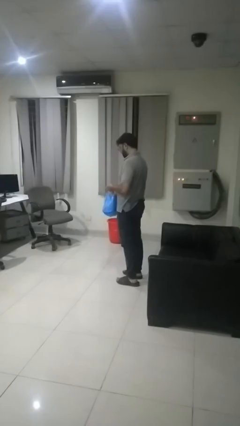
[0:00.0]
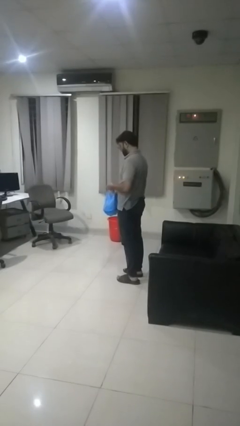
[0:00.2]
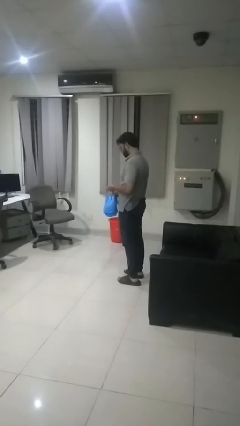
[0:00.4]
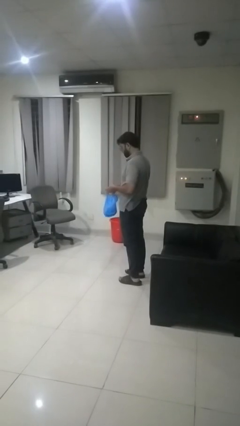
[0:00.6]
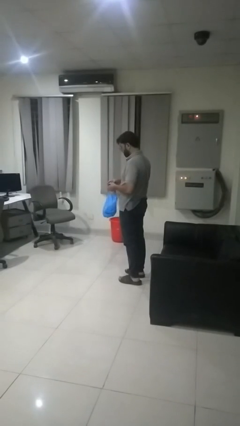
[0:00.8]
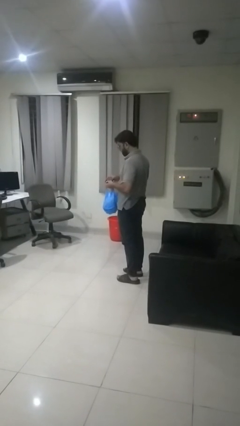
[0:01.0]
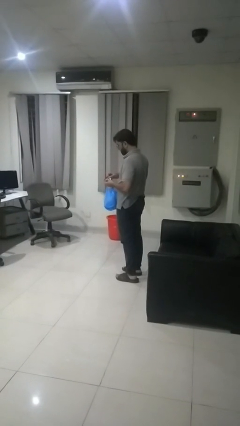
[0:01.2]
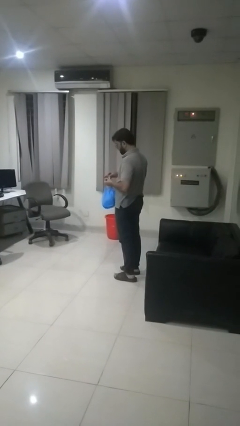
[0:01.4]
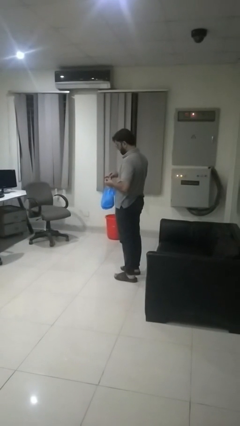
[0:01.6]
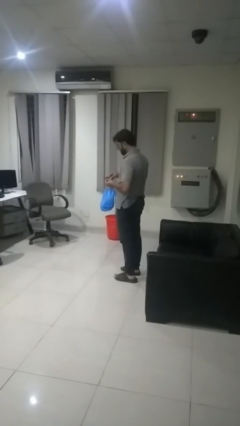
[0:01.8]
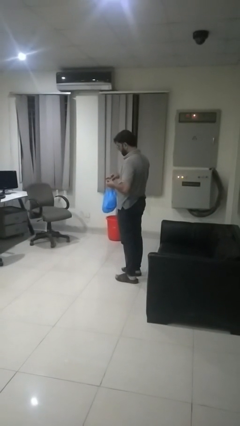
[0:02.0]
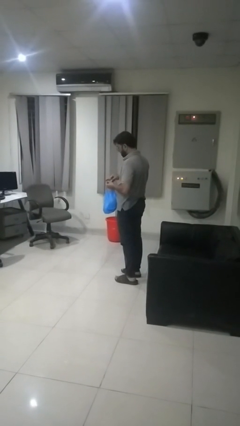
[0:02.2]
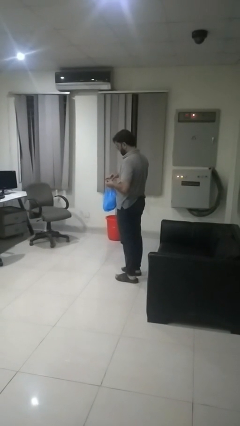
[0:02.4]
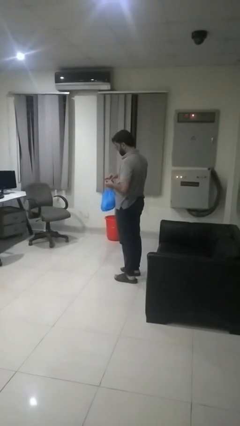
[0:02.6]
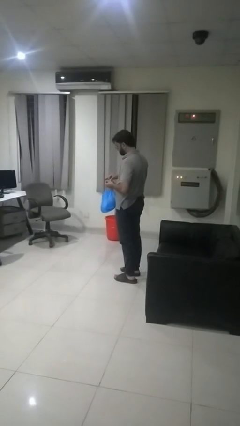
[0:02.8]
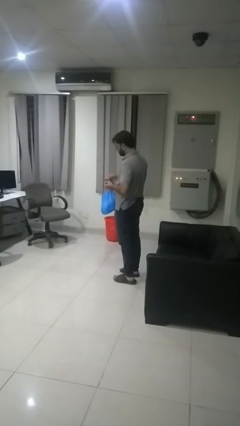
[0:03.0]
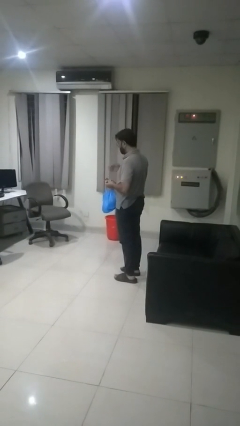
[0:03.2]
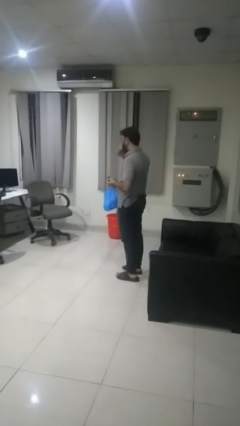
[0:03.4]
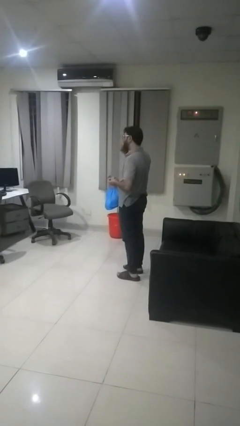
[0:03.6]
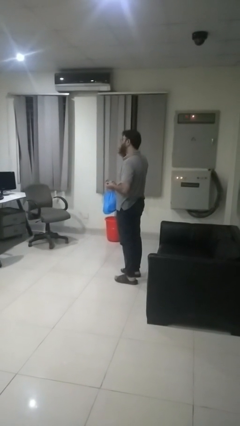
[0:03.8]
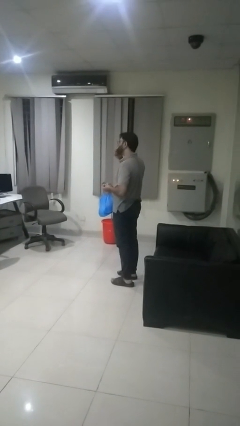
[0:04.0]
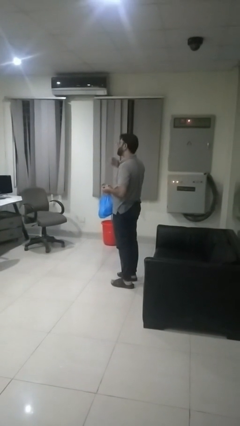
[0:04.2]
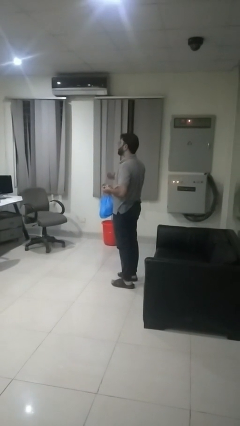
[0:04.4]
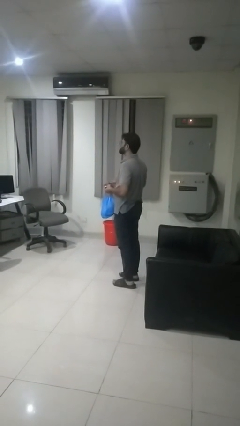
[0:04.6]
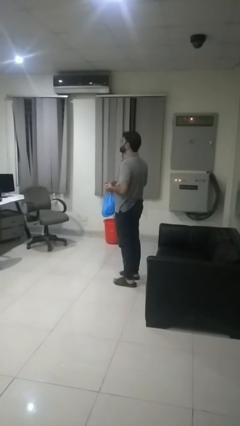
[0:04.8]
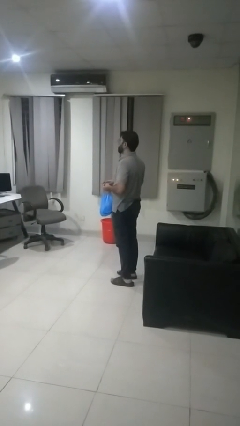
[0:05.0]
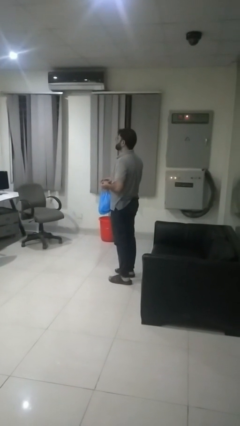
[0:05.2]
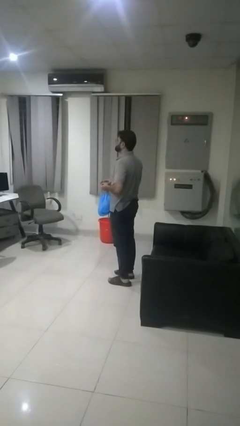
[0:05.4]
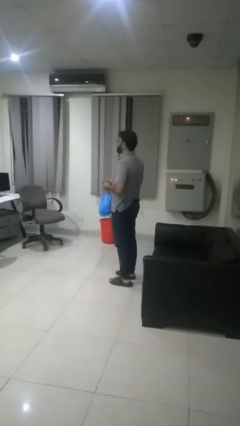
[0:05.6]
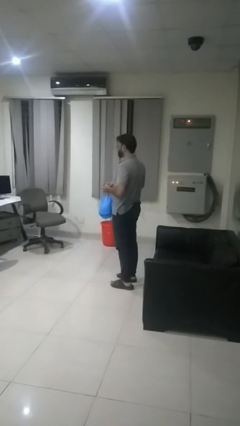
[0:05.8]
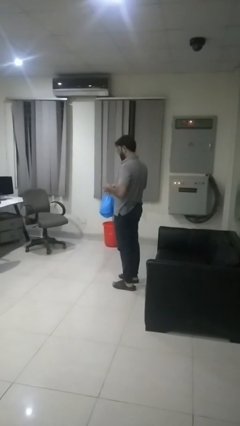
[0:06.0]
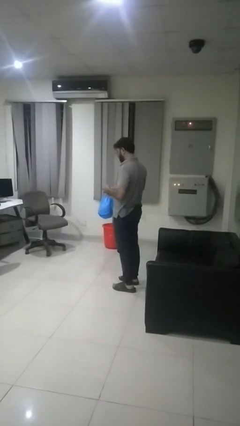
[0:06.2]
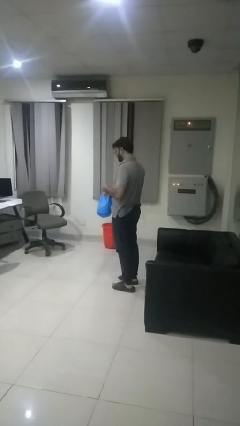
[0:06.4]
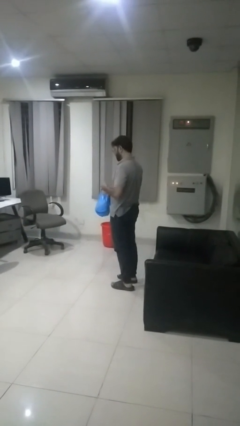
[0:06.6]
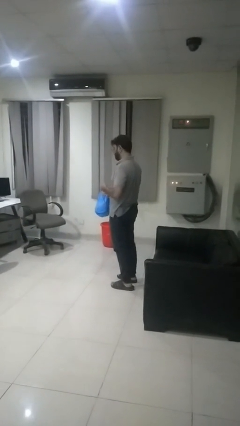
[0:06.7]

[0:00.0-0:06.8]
person eats snack from bag

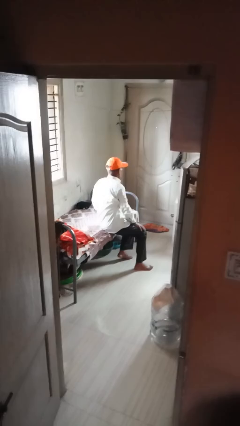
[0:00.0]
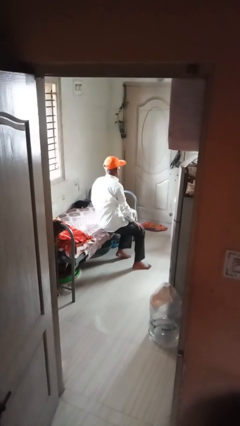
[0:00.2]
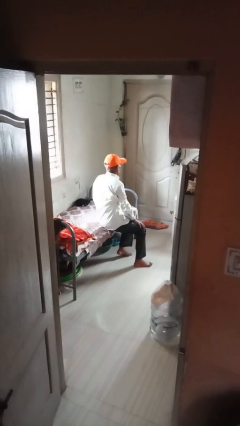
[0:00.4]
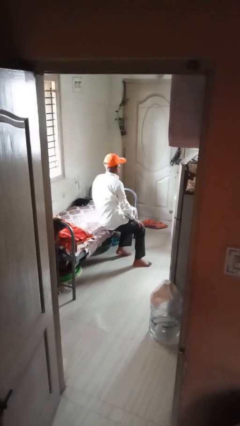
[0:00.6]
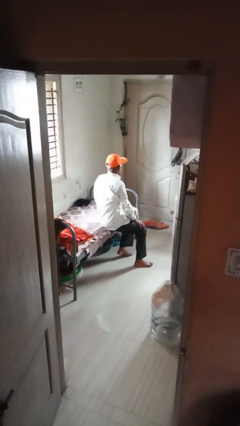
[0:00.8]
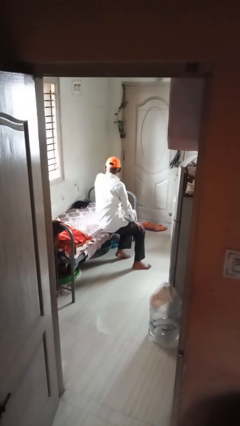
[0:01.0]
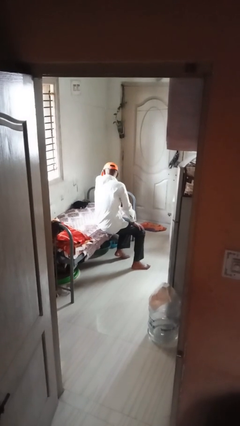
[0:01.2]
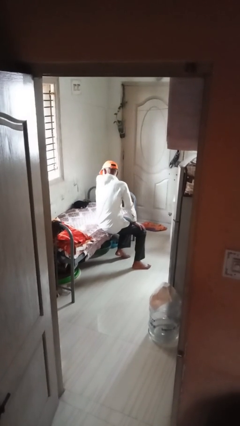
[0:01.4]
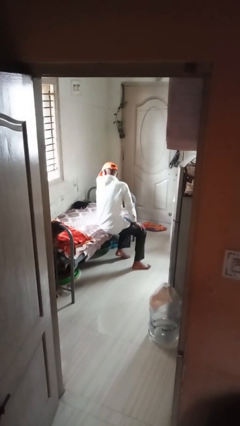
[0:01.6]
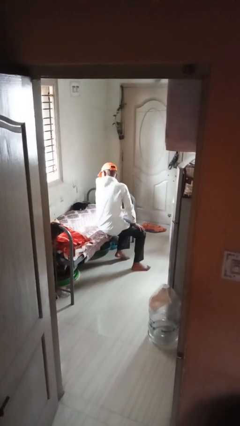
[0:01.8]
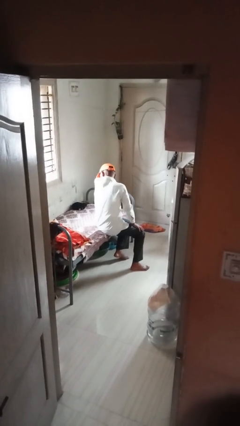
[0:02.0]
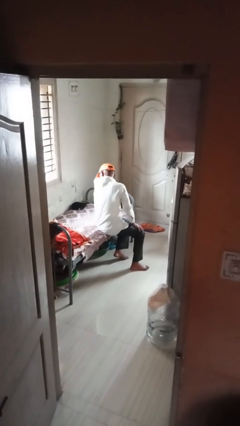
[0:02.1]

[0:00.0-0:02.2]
person sneezes into arm

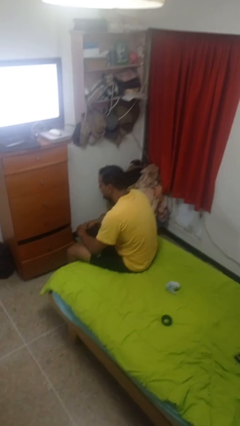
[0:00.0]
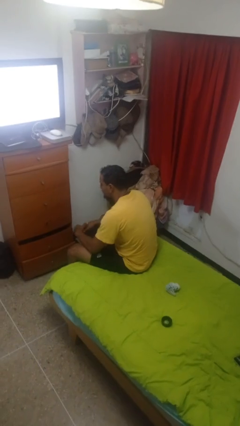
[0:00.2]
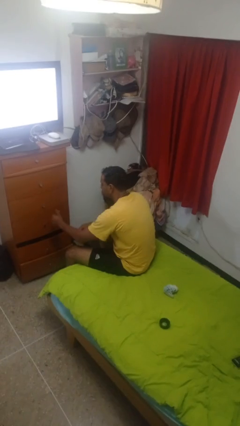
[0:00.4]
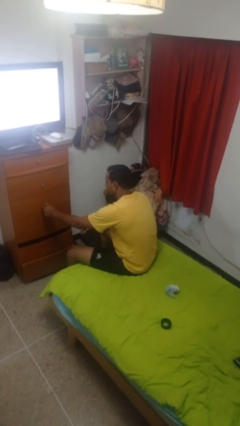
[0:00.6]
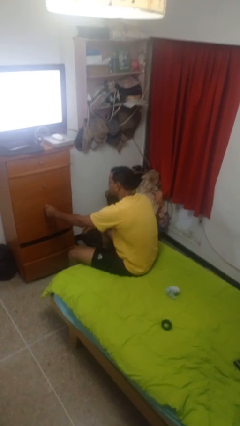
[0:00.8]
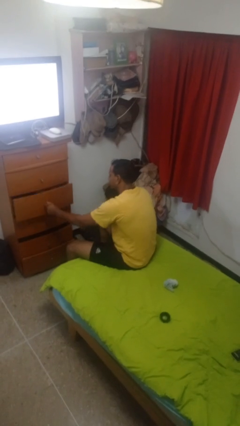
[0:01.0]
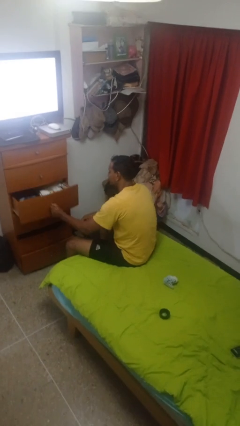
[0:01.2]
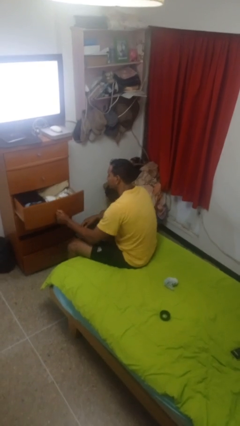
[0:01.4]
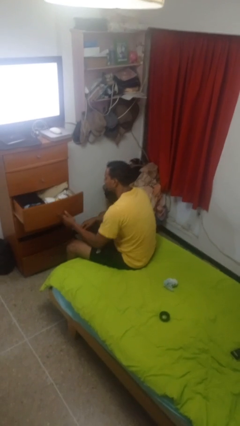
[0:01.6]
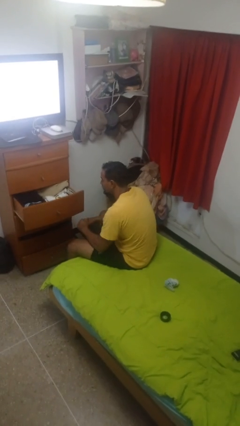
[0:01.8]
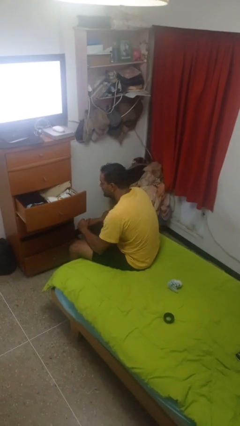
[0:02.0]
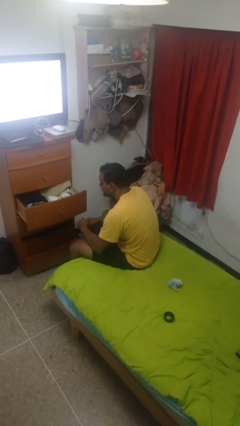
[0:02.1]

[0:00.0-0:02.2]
person opens dresser drawer

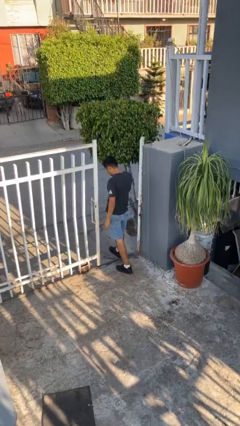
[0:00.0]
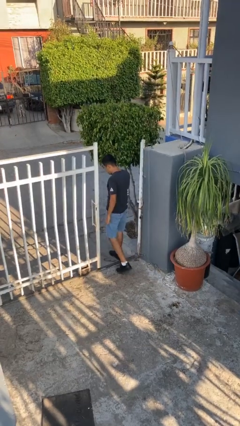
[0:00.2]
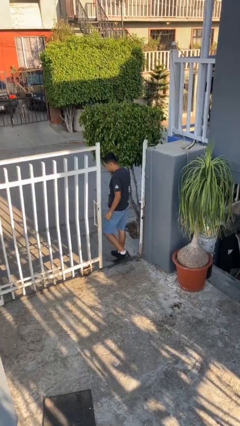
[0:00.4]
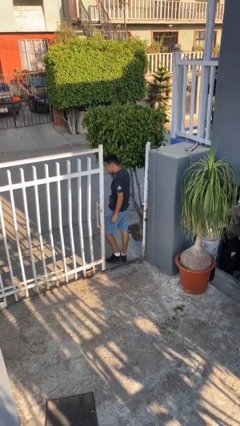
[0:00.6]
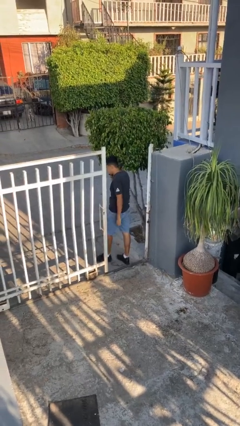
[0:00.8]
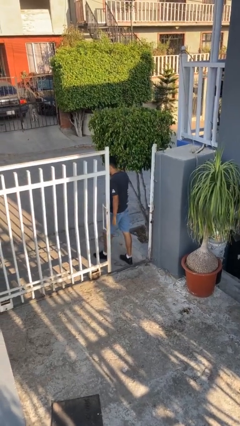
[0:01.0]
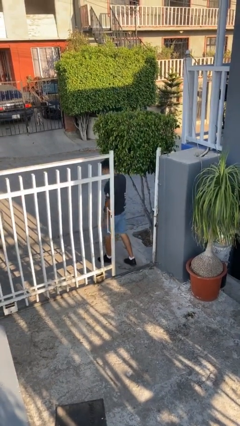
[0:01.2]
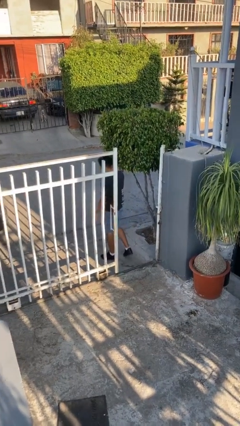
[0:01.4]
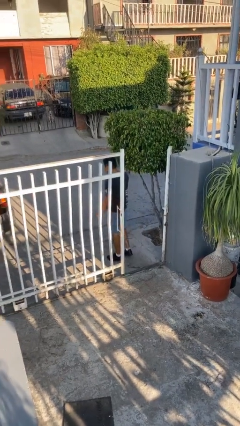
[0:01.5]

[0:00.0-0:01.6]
person exits scene through structure

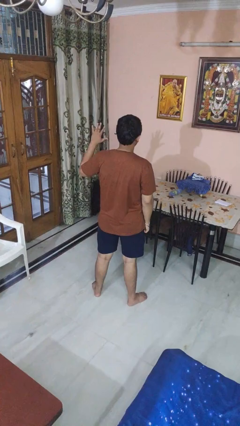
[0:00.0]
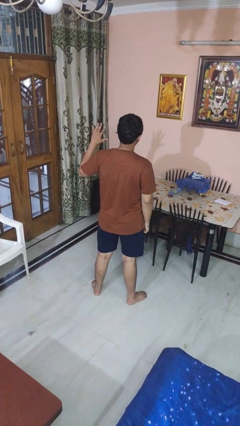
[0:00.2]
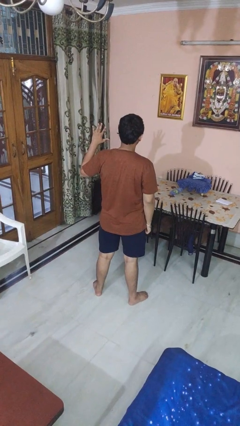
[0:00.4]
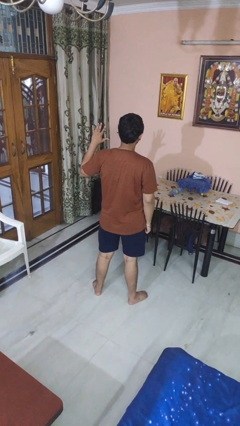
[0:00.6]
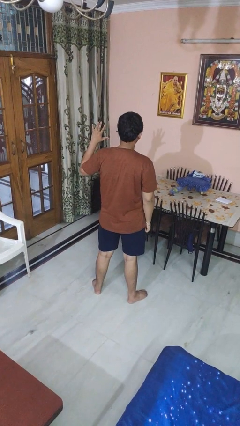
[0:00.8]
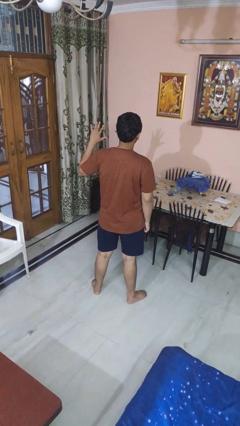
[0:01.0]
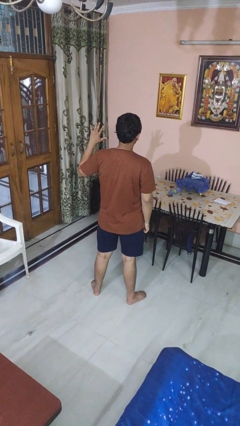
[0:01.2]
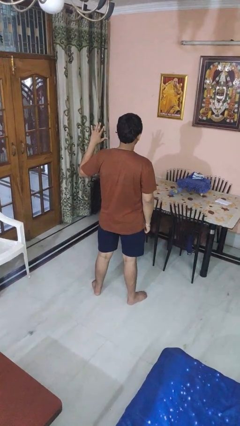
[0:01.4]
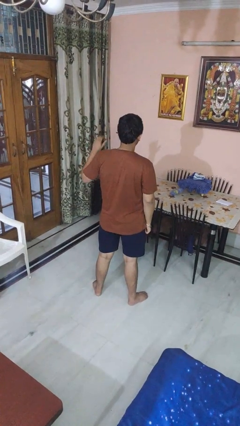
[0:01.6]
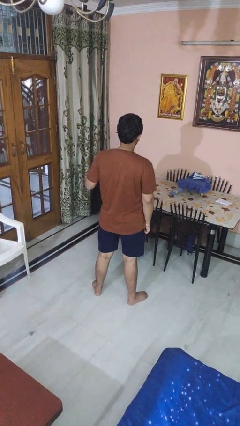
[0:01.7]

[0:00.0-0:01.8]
person gestures number five

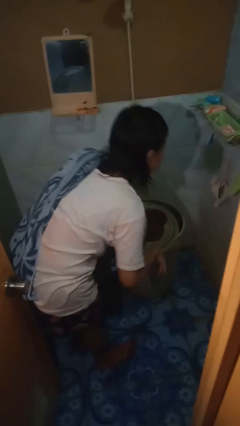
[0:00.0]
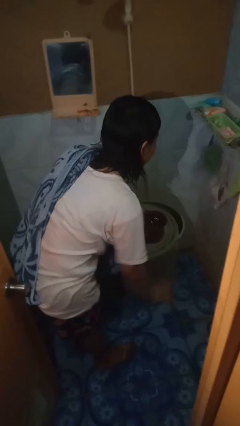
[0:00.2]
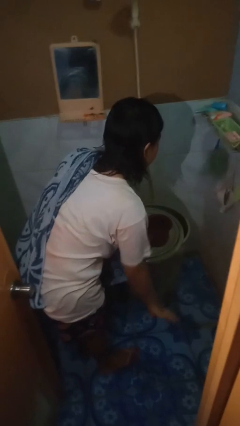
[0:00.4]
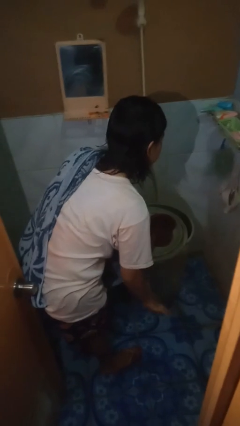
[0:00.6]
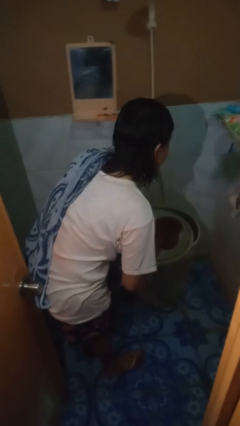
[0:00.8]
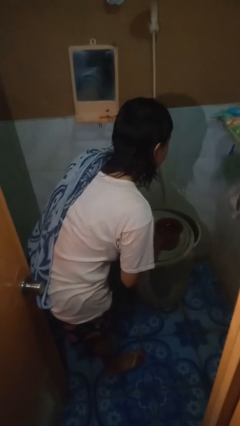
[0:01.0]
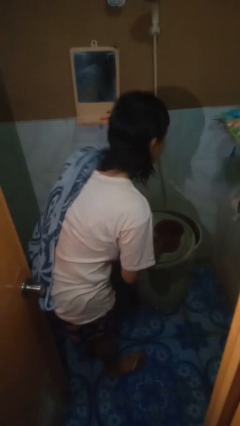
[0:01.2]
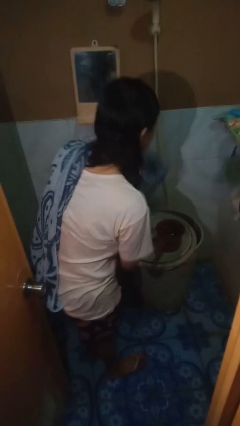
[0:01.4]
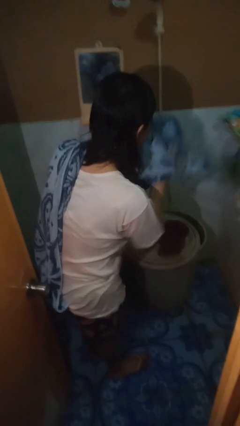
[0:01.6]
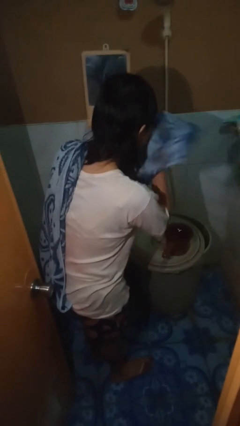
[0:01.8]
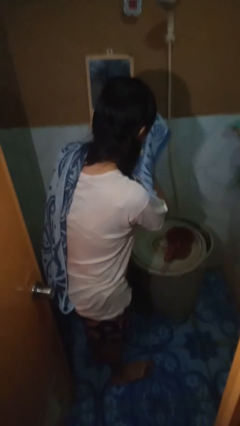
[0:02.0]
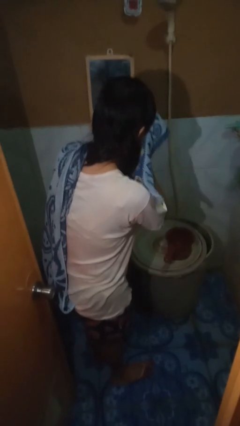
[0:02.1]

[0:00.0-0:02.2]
person dries face with towel

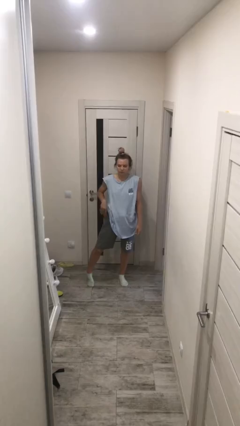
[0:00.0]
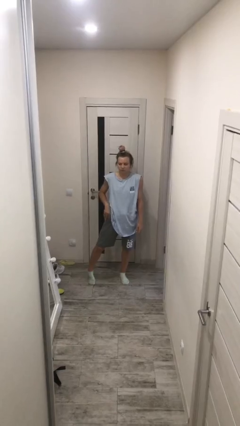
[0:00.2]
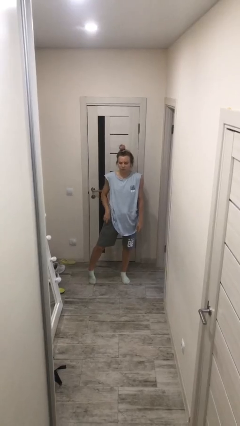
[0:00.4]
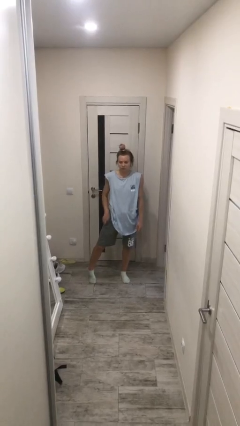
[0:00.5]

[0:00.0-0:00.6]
person puts phone into pocket
